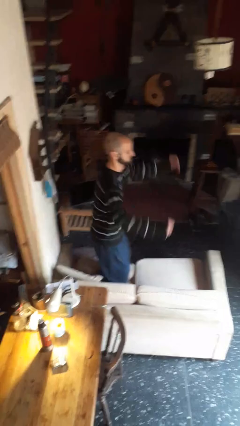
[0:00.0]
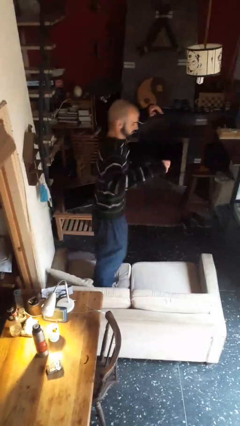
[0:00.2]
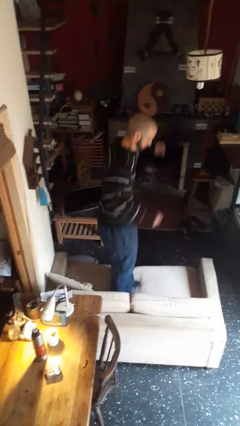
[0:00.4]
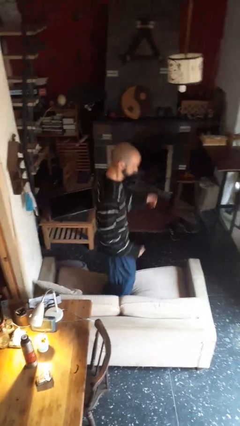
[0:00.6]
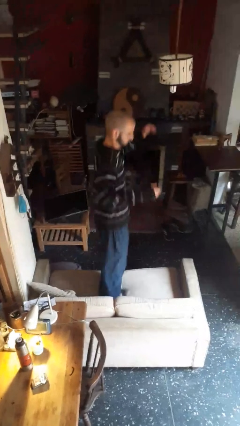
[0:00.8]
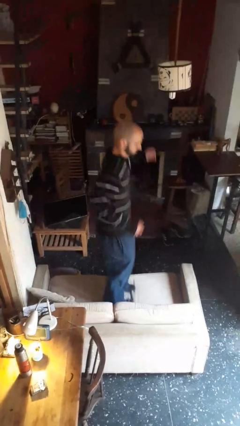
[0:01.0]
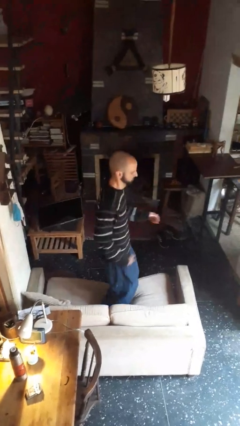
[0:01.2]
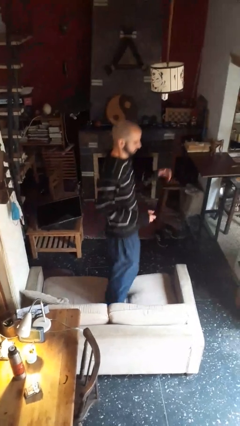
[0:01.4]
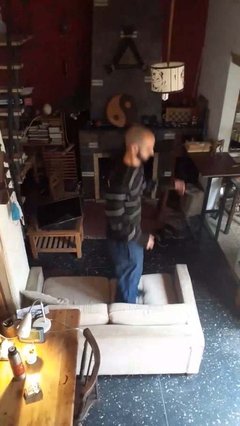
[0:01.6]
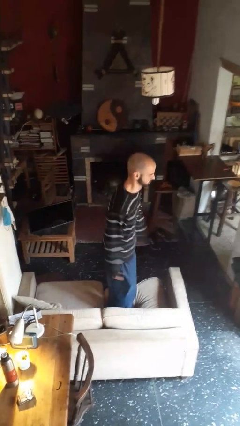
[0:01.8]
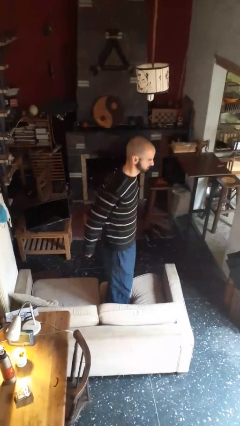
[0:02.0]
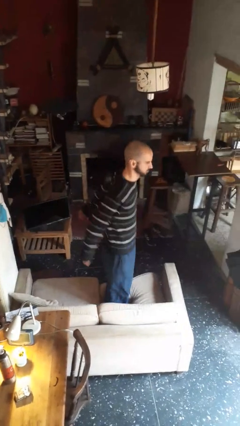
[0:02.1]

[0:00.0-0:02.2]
person jumps on couch

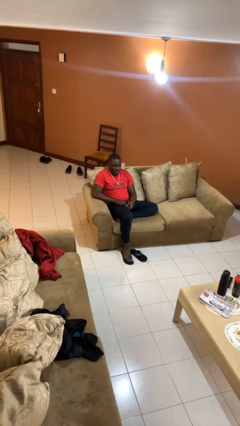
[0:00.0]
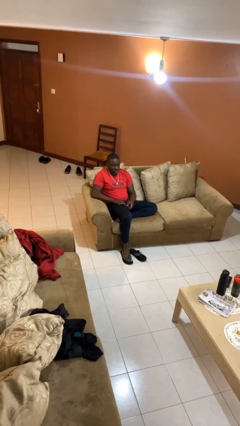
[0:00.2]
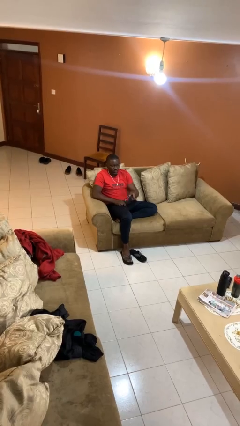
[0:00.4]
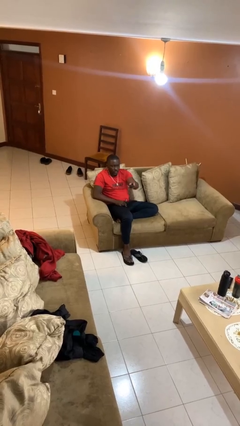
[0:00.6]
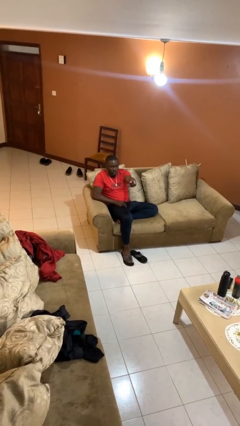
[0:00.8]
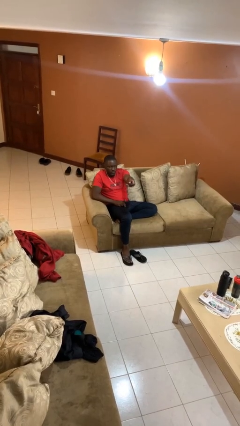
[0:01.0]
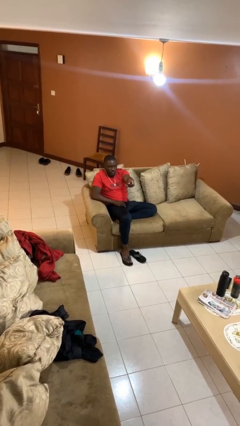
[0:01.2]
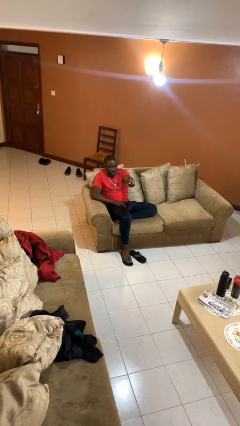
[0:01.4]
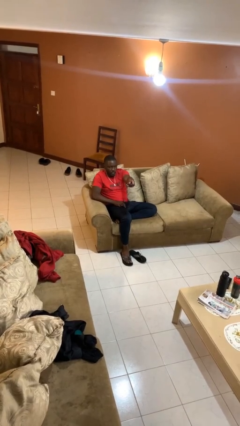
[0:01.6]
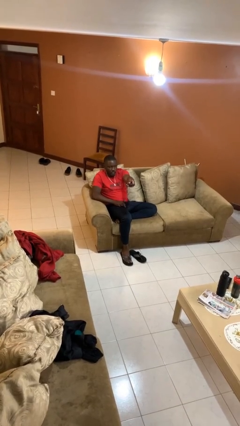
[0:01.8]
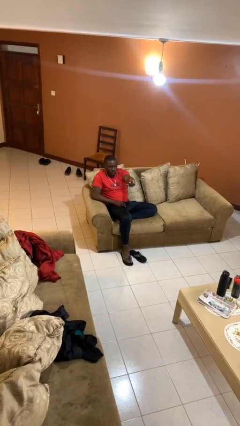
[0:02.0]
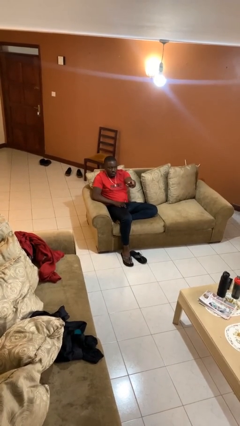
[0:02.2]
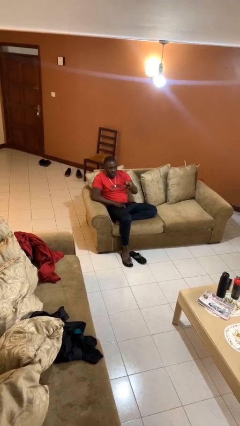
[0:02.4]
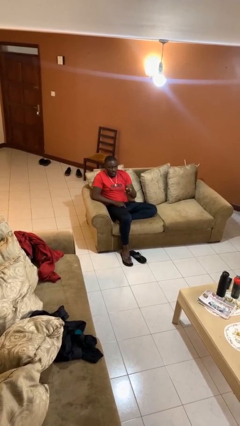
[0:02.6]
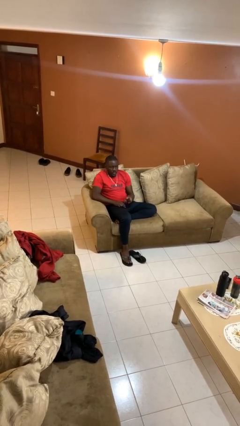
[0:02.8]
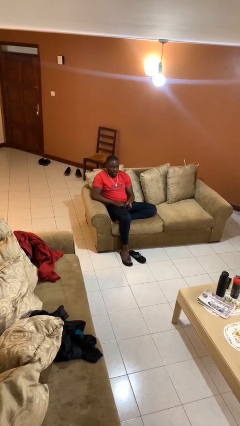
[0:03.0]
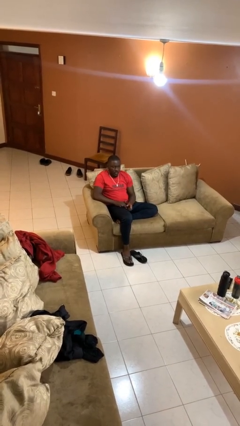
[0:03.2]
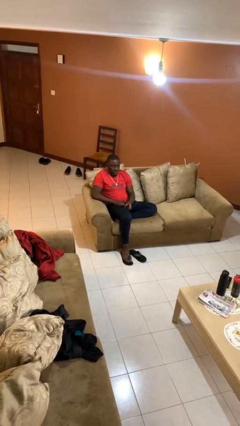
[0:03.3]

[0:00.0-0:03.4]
person uses television remote

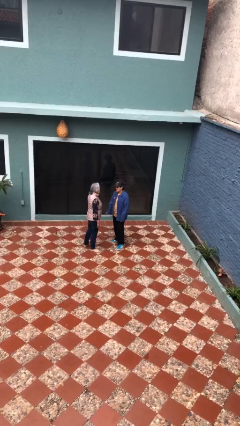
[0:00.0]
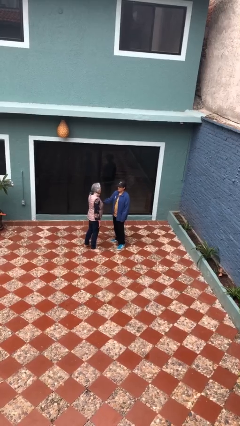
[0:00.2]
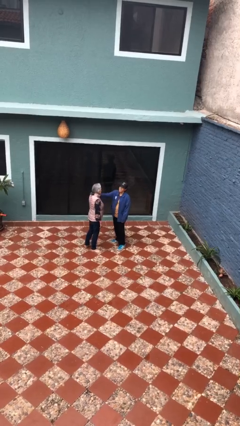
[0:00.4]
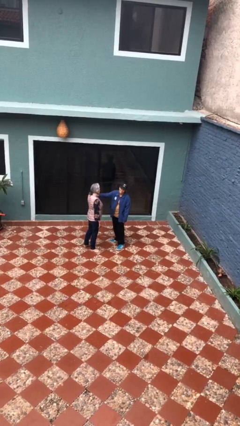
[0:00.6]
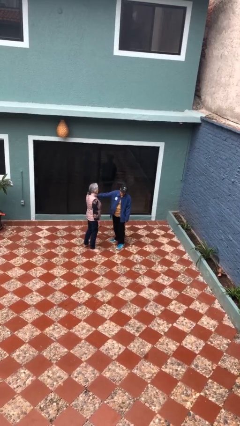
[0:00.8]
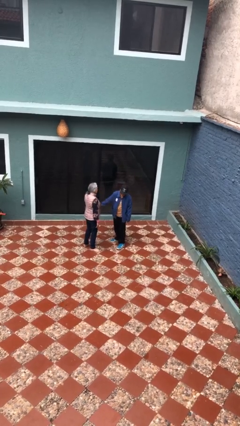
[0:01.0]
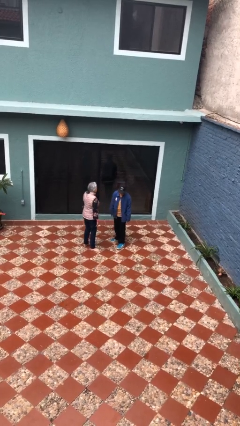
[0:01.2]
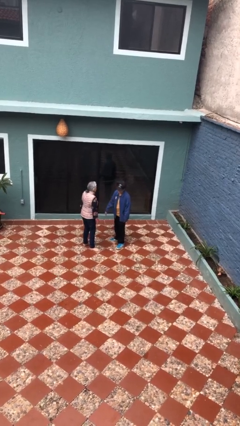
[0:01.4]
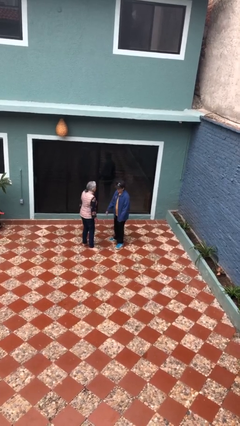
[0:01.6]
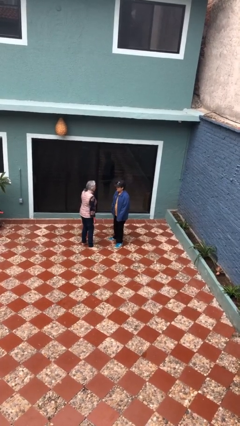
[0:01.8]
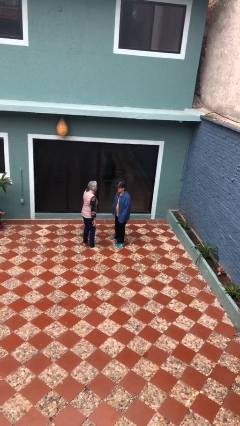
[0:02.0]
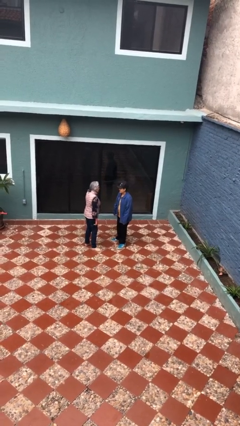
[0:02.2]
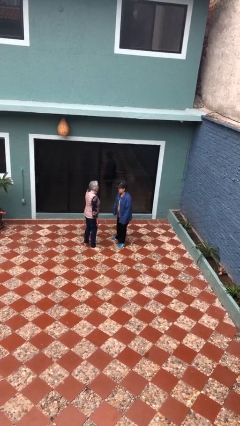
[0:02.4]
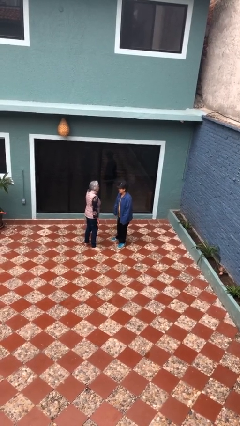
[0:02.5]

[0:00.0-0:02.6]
person shoves person

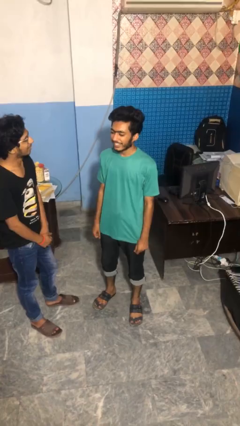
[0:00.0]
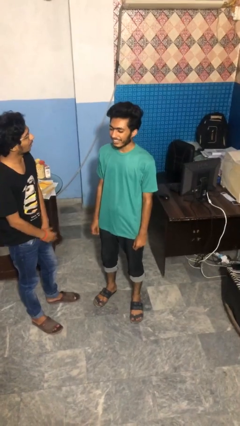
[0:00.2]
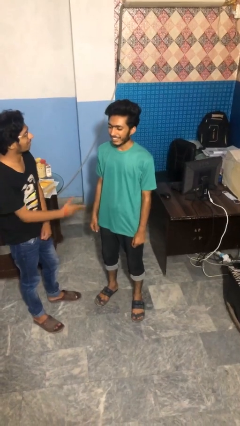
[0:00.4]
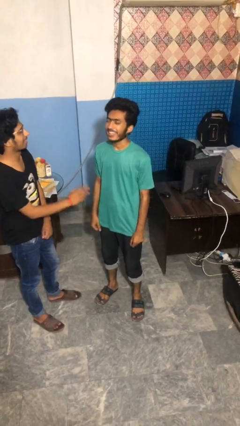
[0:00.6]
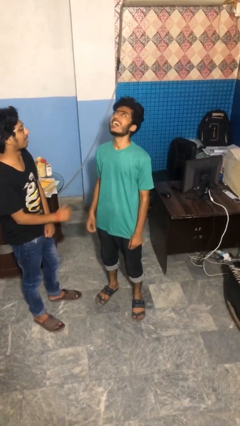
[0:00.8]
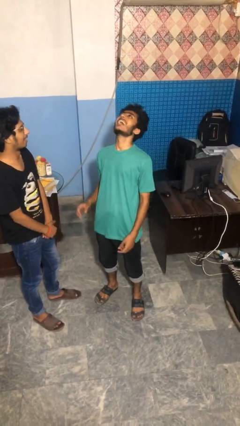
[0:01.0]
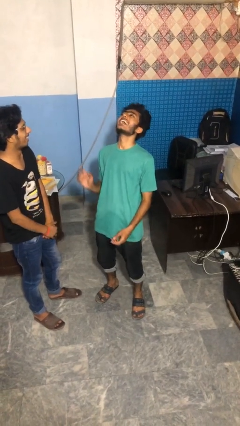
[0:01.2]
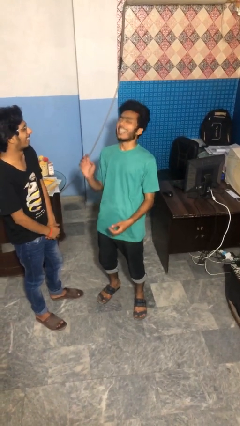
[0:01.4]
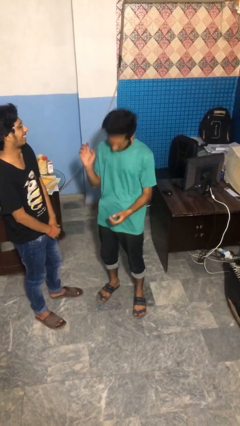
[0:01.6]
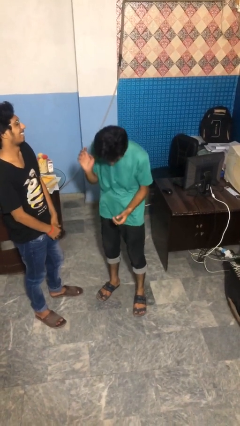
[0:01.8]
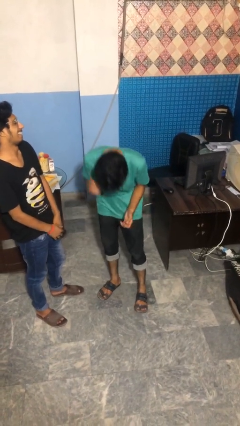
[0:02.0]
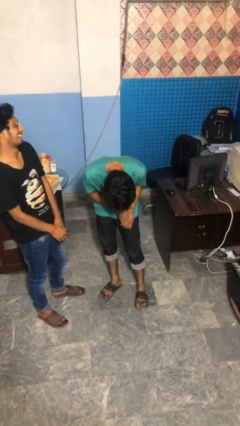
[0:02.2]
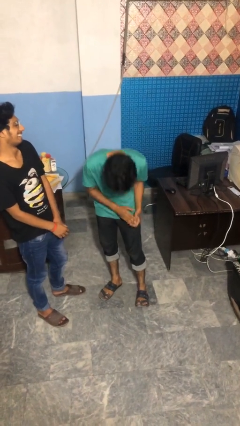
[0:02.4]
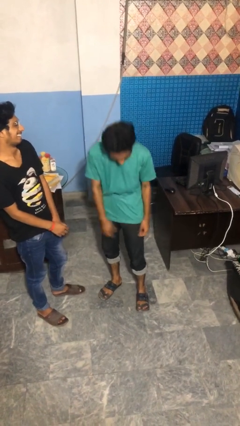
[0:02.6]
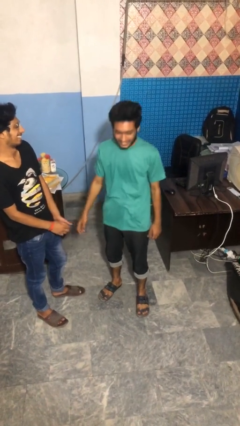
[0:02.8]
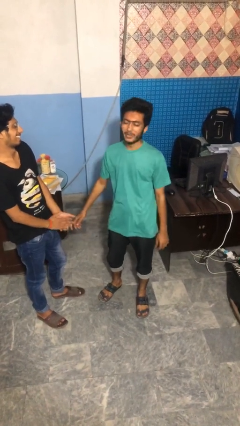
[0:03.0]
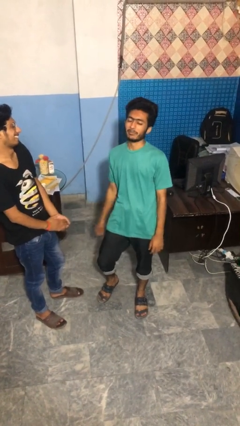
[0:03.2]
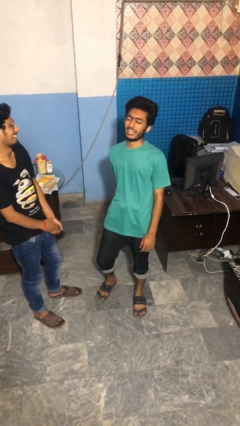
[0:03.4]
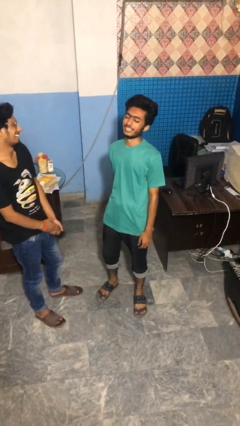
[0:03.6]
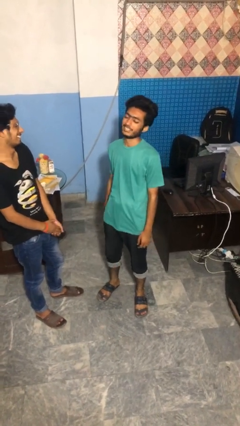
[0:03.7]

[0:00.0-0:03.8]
person laughs with person

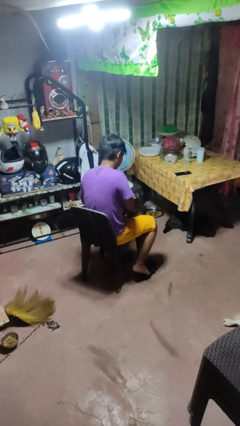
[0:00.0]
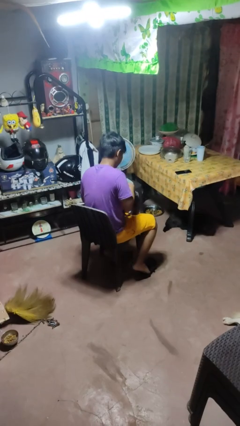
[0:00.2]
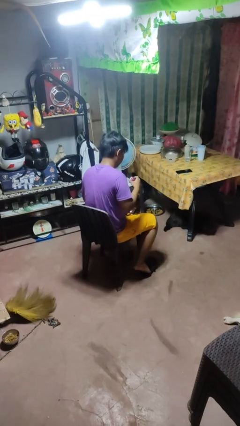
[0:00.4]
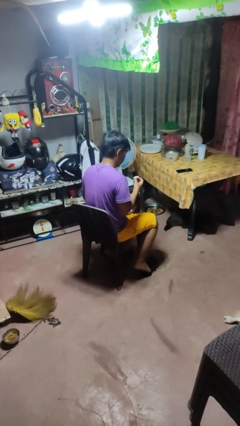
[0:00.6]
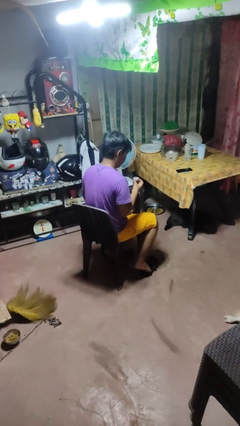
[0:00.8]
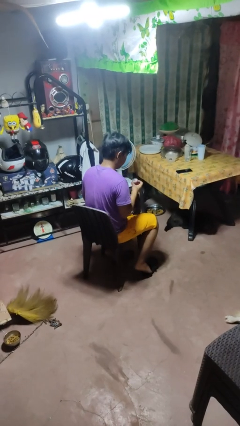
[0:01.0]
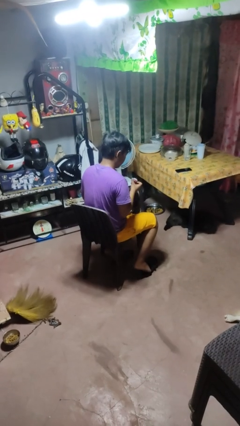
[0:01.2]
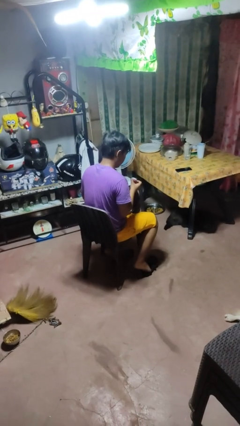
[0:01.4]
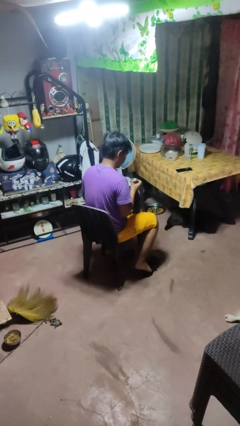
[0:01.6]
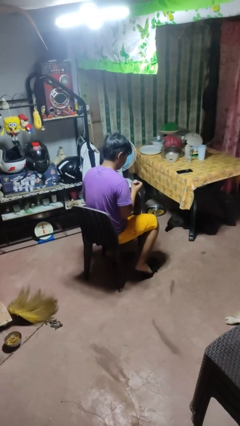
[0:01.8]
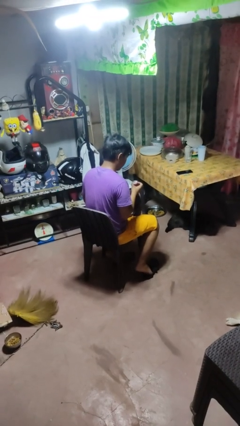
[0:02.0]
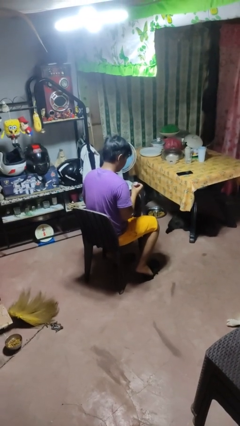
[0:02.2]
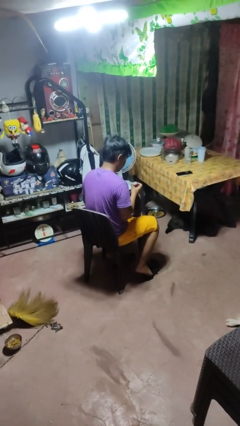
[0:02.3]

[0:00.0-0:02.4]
person takes object from purse

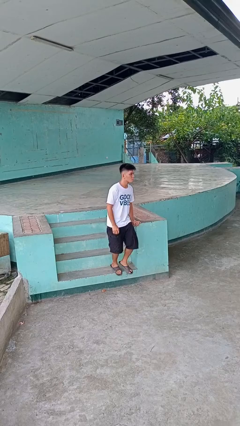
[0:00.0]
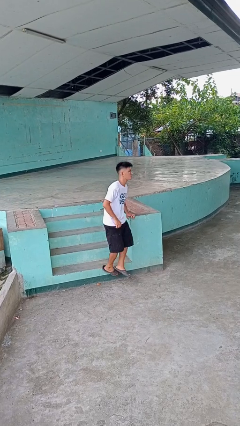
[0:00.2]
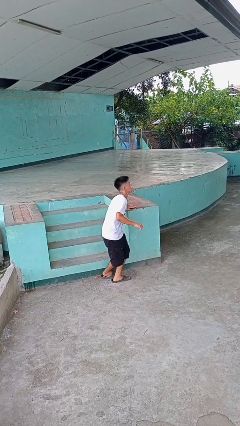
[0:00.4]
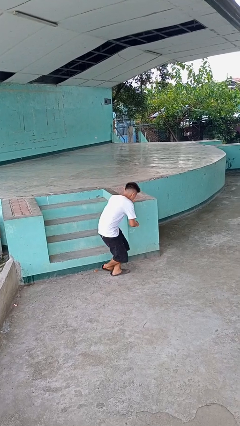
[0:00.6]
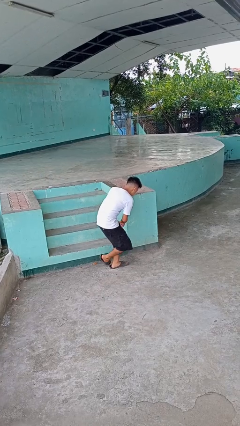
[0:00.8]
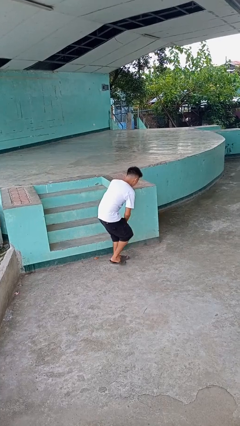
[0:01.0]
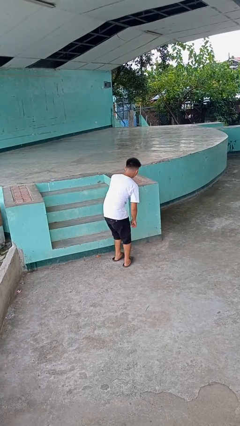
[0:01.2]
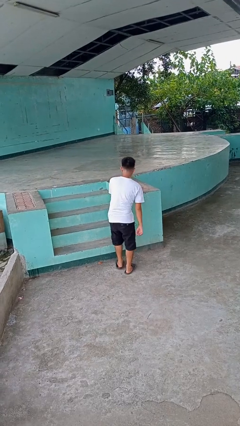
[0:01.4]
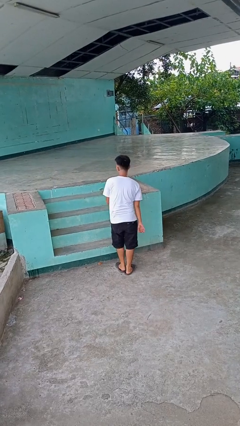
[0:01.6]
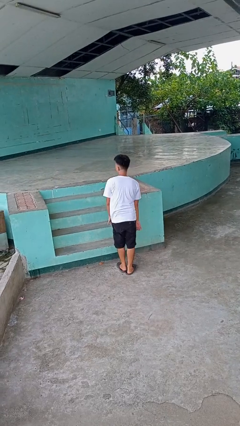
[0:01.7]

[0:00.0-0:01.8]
person trips on stair

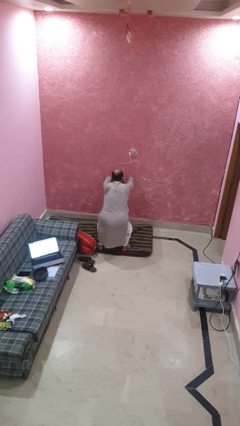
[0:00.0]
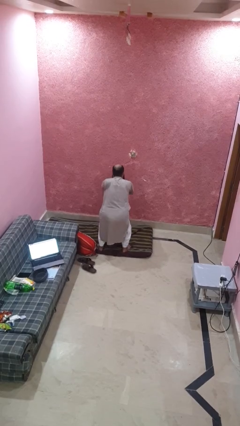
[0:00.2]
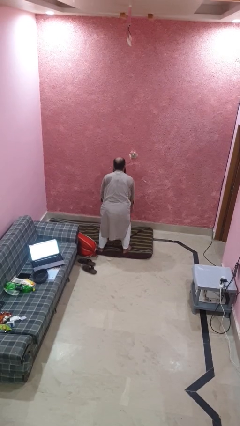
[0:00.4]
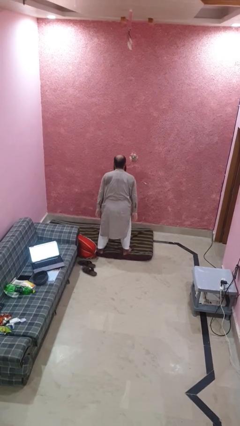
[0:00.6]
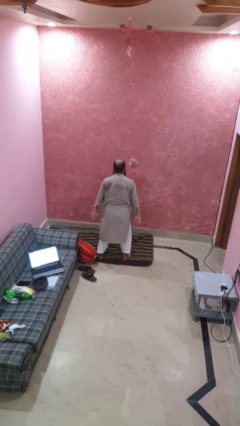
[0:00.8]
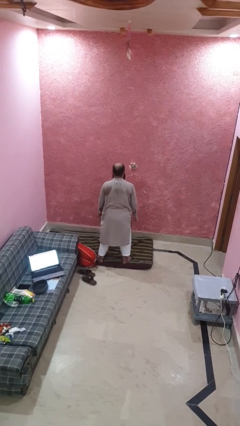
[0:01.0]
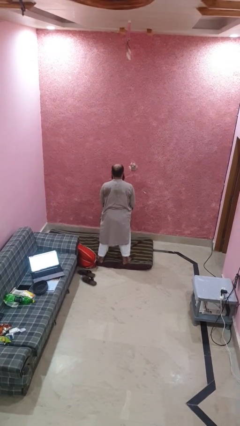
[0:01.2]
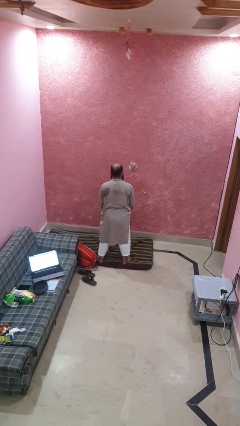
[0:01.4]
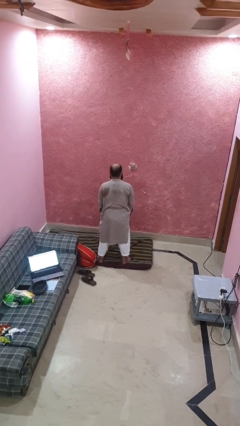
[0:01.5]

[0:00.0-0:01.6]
person stands up
